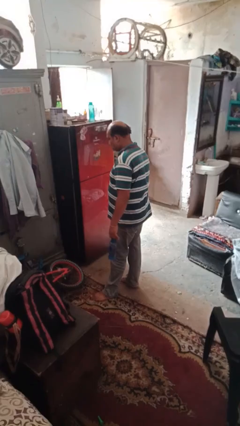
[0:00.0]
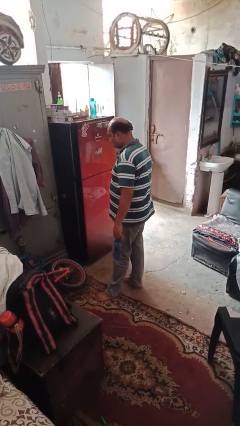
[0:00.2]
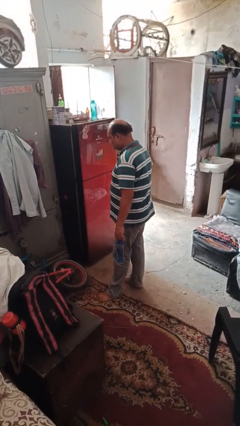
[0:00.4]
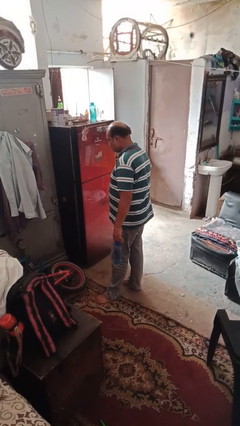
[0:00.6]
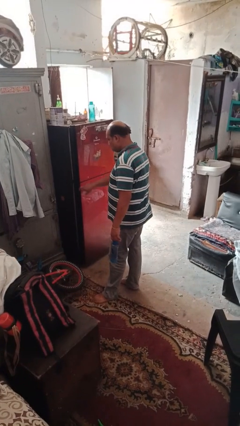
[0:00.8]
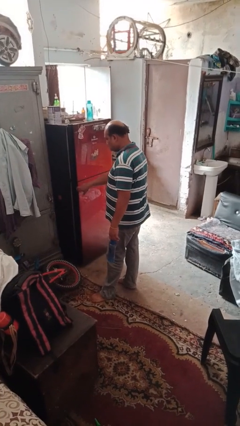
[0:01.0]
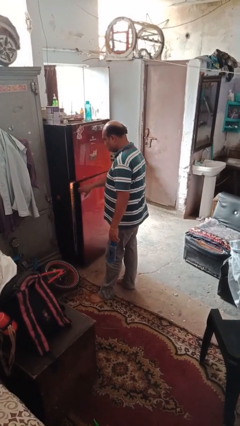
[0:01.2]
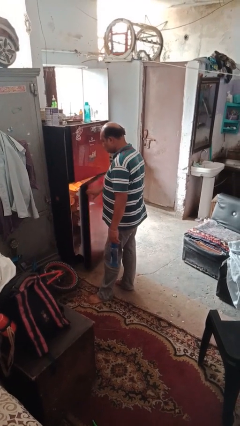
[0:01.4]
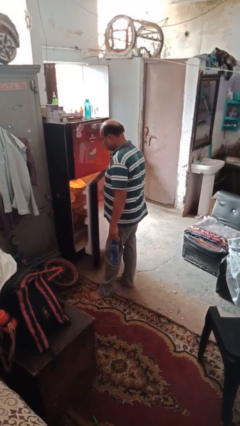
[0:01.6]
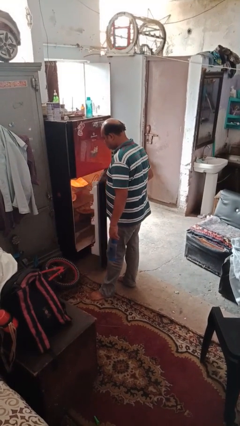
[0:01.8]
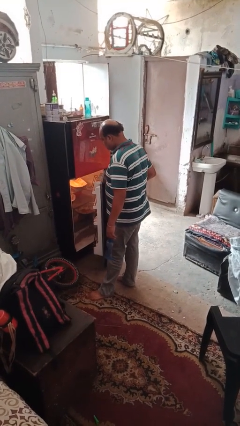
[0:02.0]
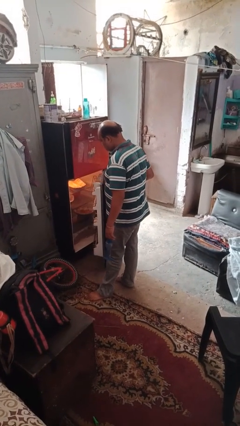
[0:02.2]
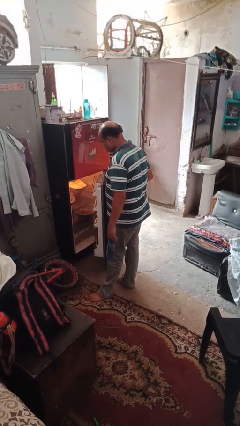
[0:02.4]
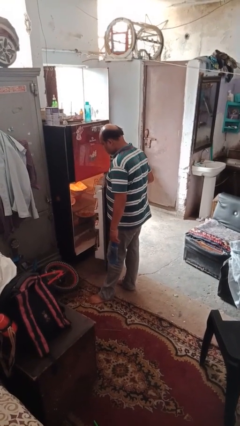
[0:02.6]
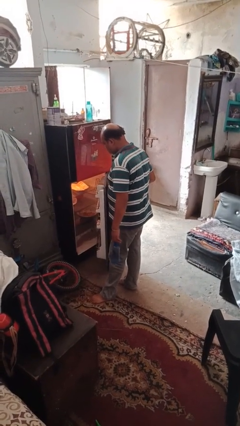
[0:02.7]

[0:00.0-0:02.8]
person opens refrigerator

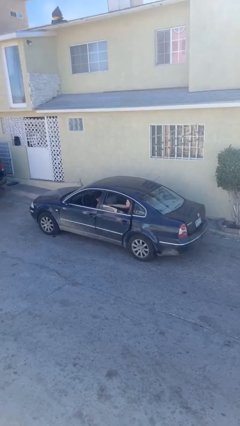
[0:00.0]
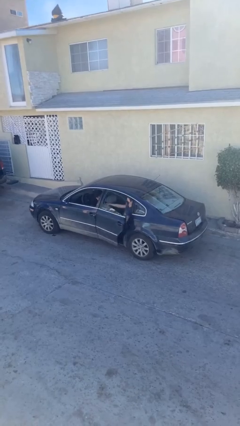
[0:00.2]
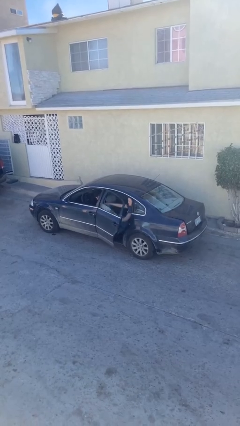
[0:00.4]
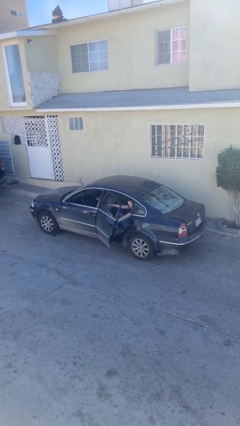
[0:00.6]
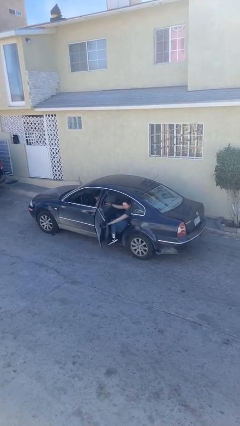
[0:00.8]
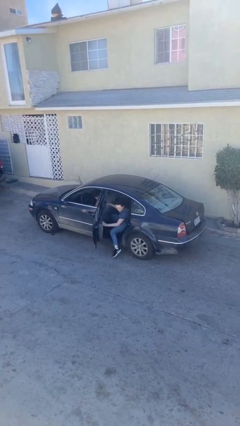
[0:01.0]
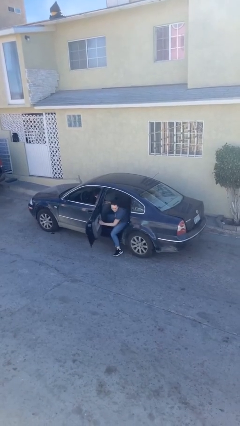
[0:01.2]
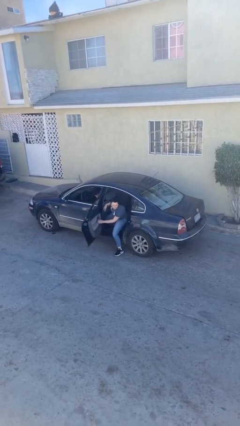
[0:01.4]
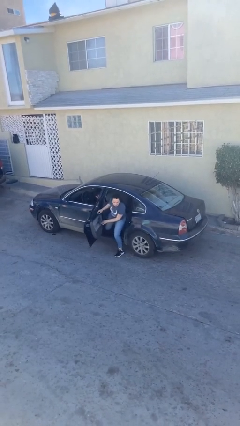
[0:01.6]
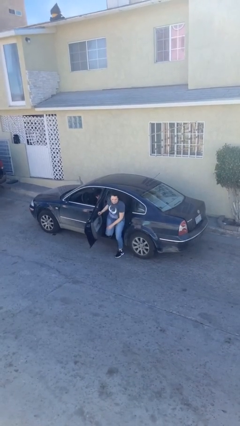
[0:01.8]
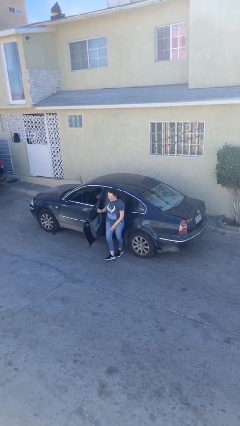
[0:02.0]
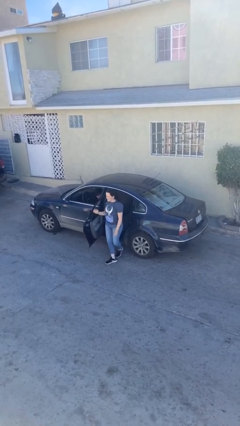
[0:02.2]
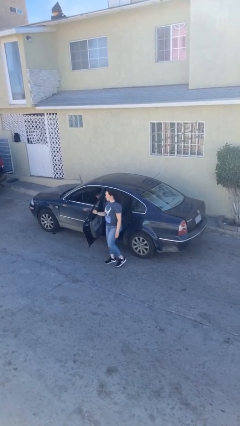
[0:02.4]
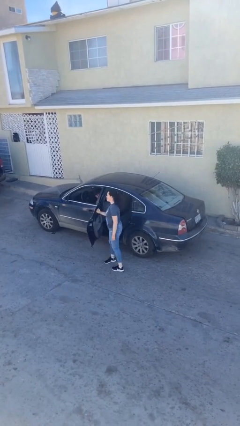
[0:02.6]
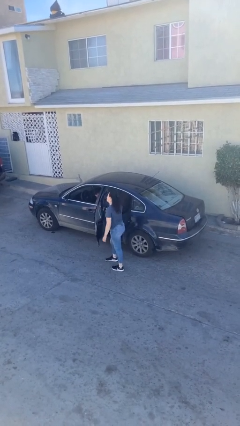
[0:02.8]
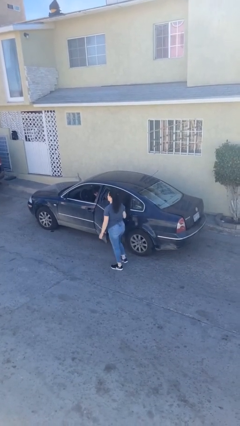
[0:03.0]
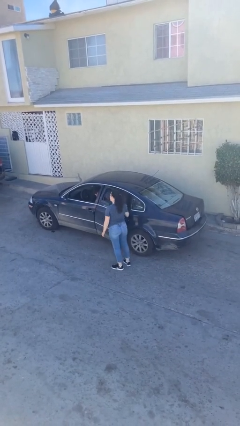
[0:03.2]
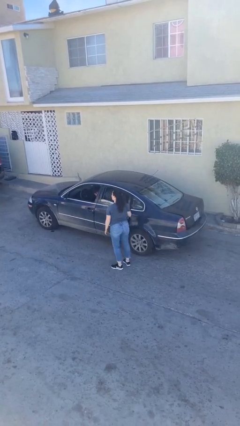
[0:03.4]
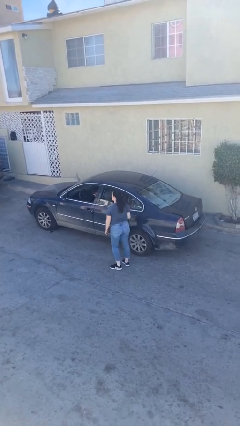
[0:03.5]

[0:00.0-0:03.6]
car drops off person

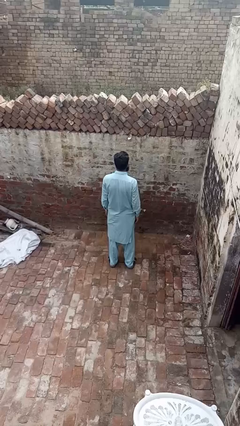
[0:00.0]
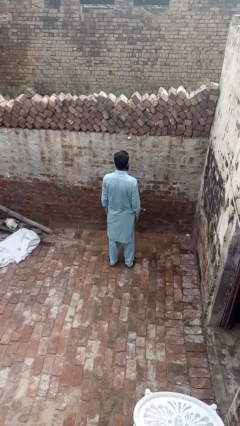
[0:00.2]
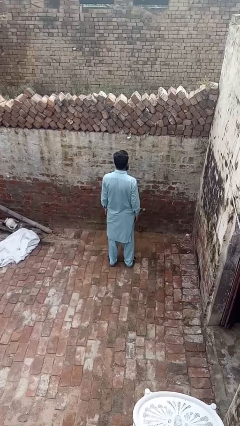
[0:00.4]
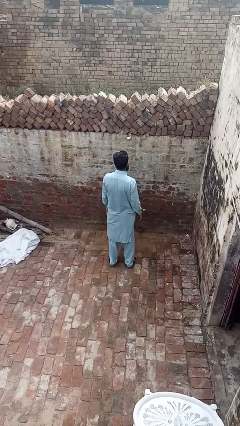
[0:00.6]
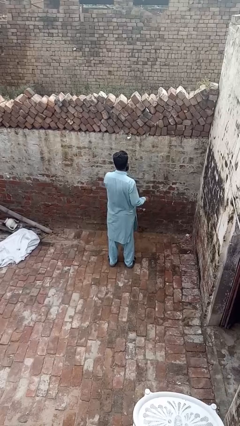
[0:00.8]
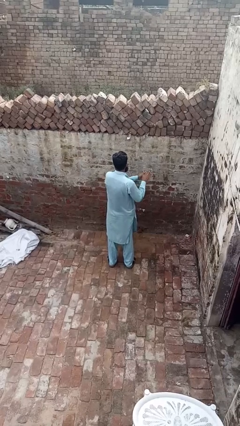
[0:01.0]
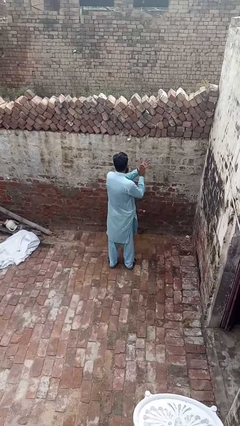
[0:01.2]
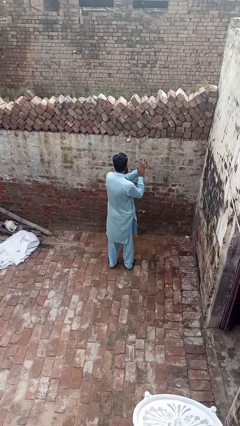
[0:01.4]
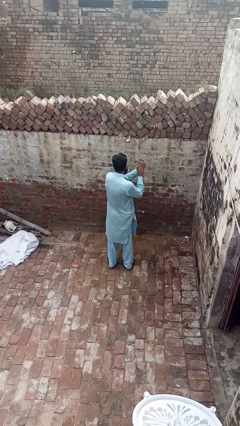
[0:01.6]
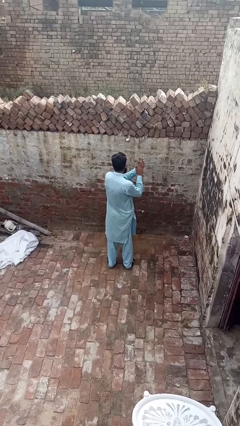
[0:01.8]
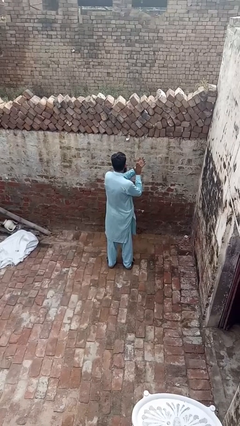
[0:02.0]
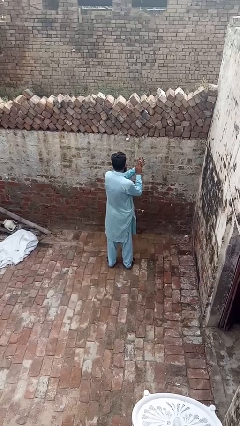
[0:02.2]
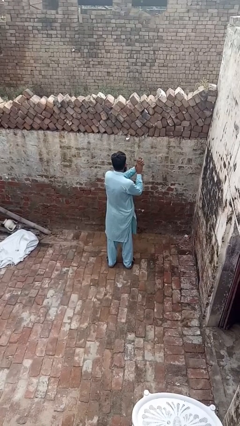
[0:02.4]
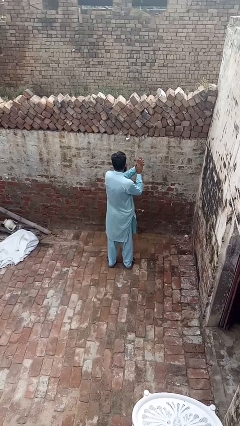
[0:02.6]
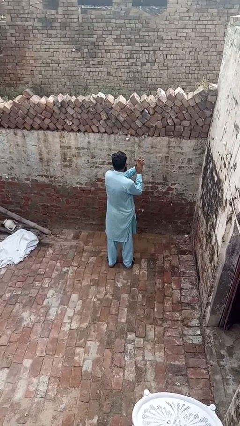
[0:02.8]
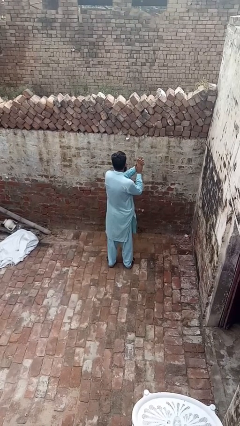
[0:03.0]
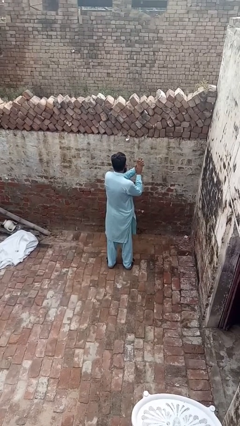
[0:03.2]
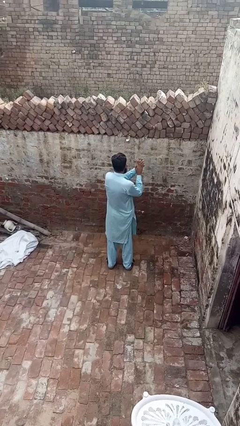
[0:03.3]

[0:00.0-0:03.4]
person claps hands

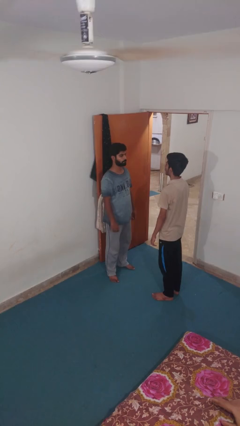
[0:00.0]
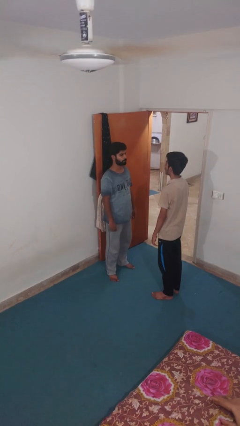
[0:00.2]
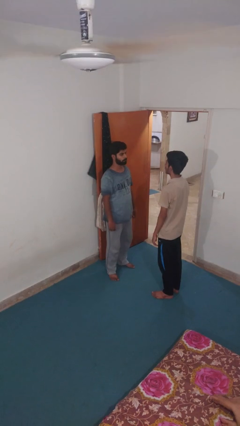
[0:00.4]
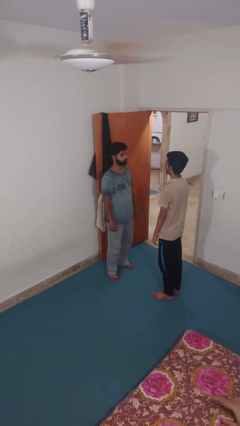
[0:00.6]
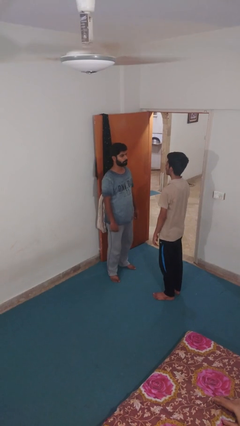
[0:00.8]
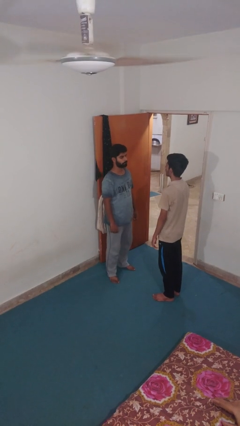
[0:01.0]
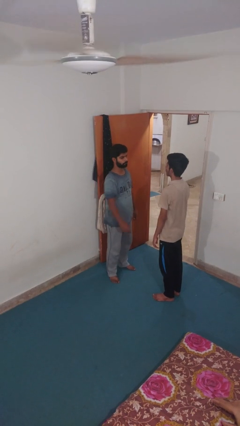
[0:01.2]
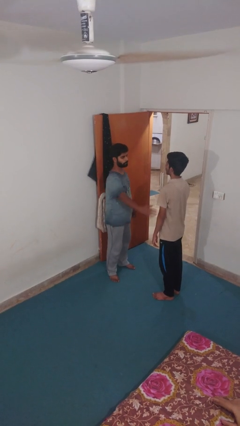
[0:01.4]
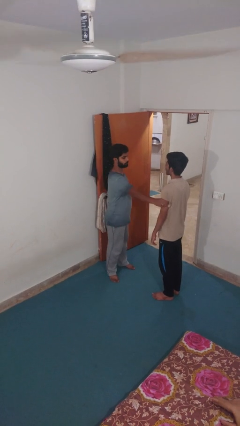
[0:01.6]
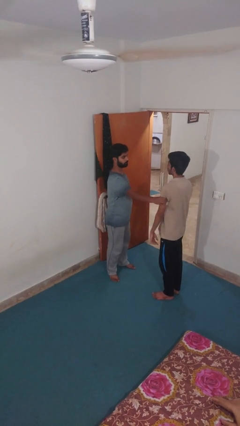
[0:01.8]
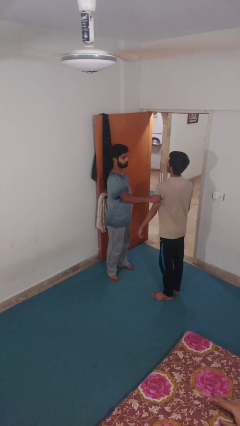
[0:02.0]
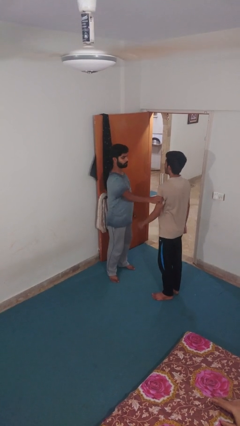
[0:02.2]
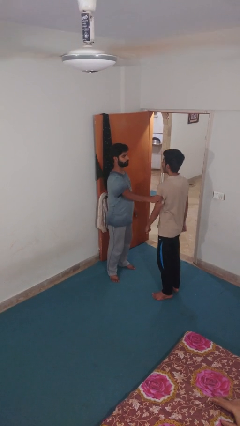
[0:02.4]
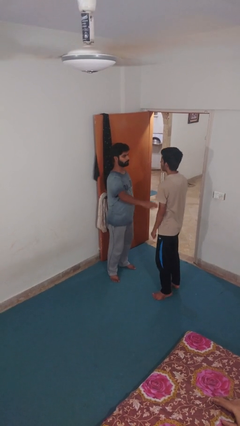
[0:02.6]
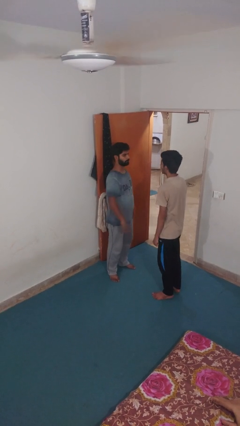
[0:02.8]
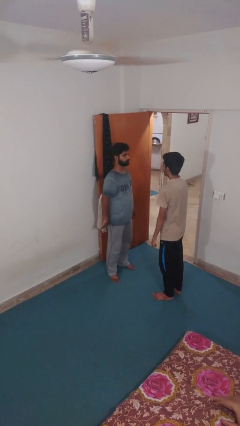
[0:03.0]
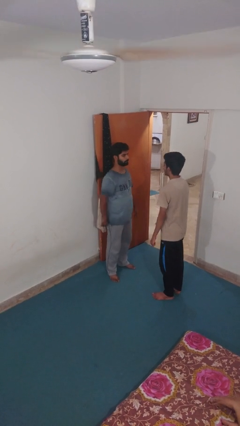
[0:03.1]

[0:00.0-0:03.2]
person grabs person by bicep

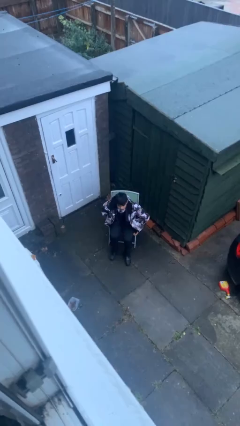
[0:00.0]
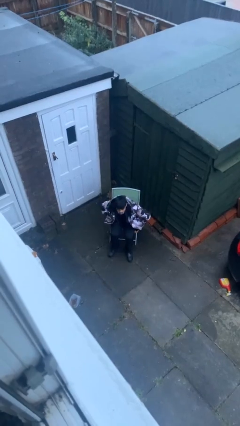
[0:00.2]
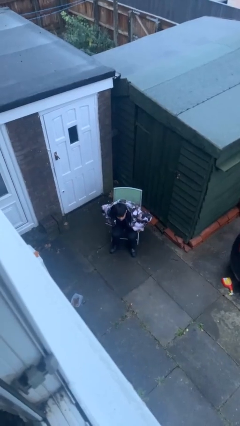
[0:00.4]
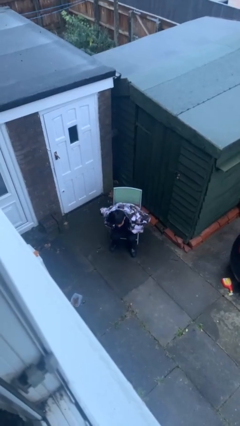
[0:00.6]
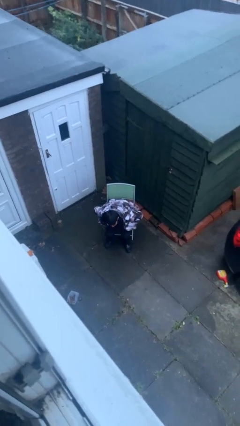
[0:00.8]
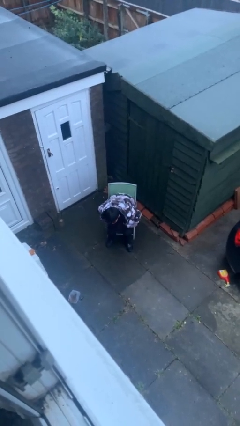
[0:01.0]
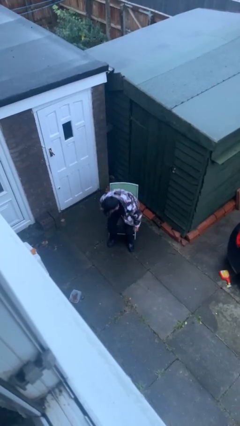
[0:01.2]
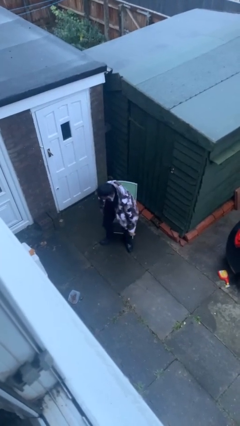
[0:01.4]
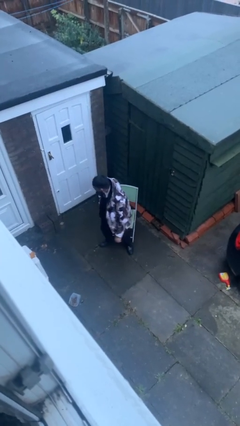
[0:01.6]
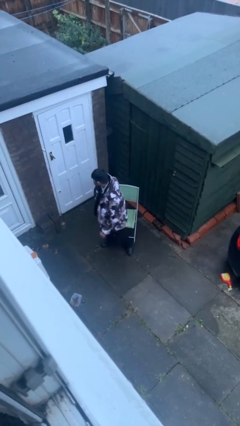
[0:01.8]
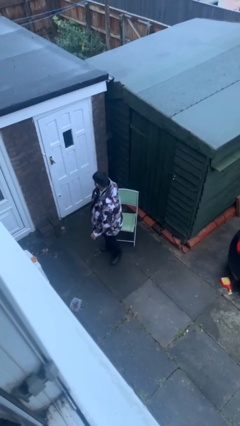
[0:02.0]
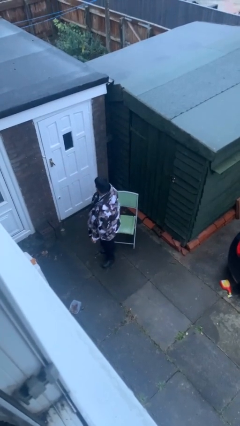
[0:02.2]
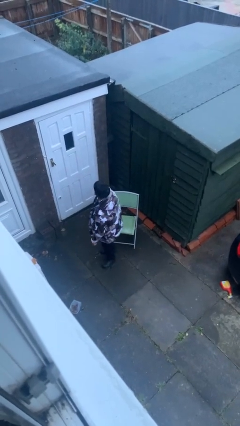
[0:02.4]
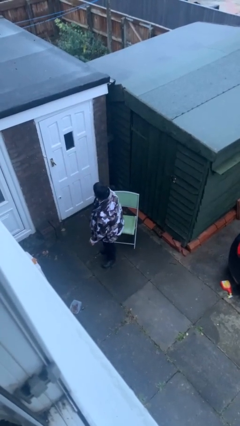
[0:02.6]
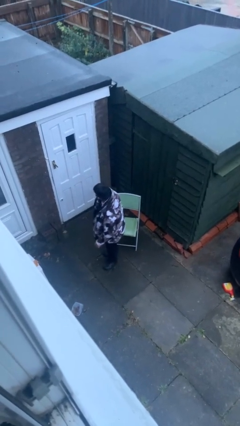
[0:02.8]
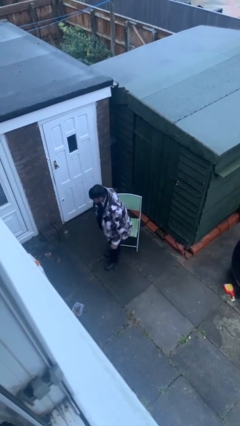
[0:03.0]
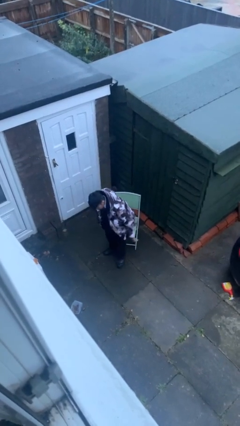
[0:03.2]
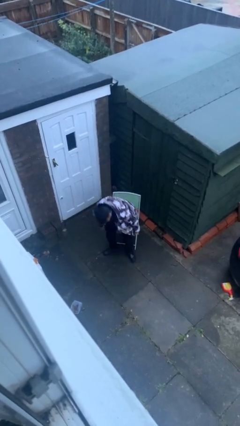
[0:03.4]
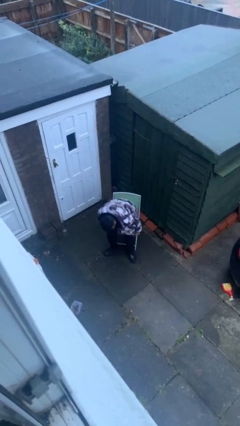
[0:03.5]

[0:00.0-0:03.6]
person stands up

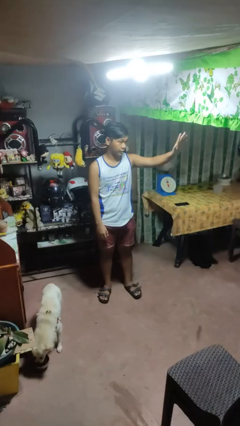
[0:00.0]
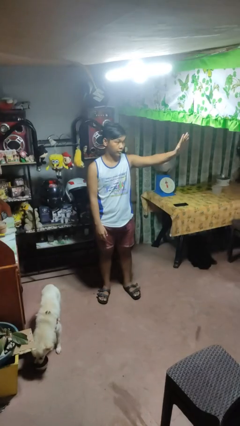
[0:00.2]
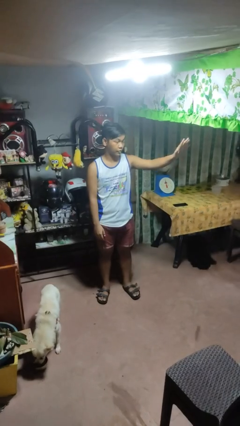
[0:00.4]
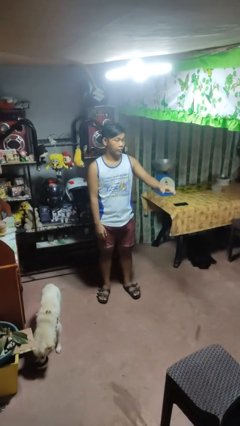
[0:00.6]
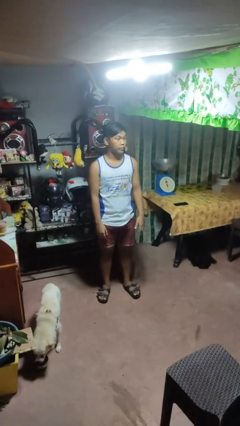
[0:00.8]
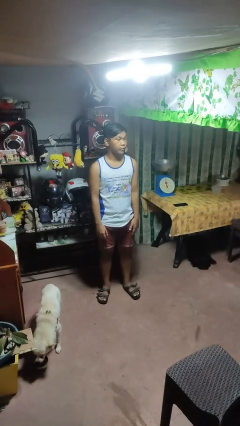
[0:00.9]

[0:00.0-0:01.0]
person gestures stop
